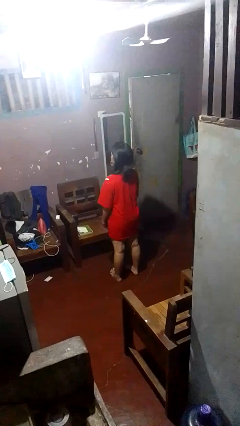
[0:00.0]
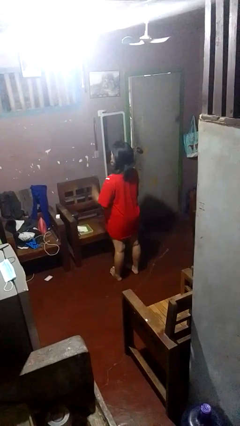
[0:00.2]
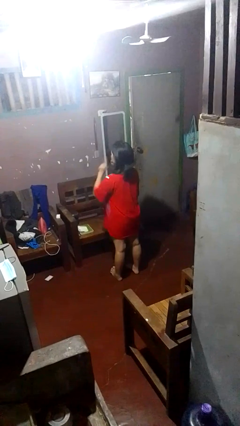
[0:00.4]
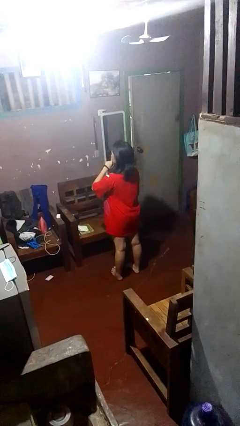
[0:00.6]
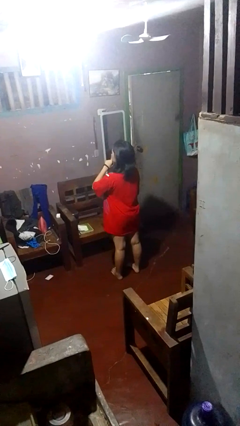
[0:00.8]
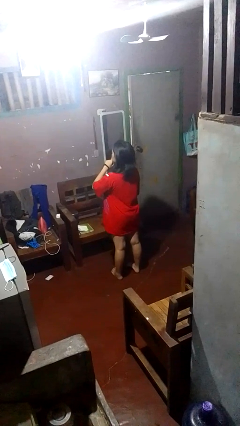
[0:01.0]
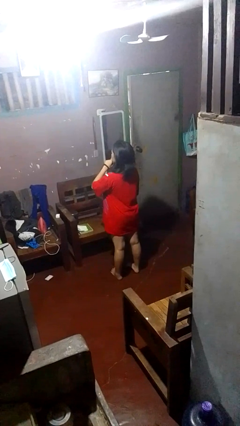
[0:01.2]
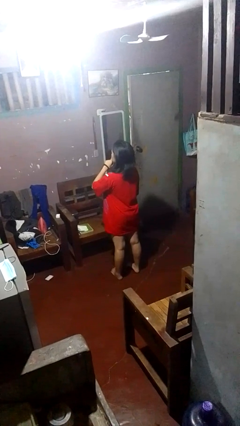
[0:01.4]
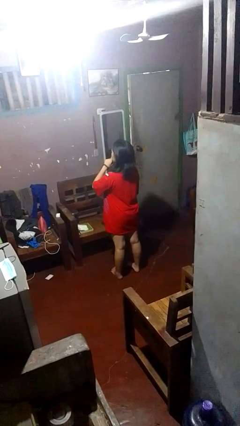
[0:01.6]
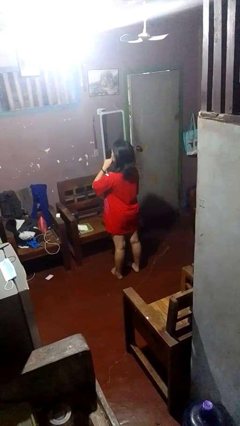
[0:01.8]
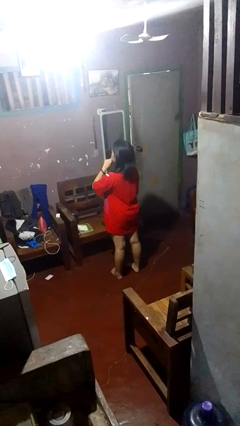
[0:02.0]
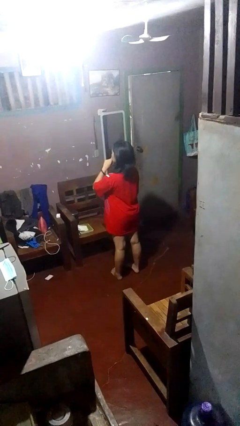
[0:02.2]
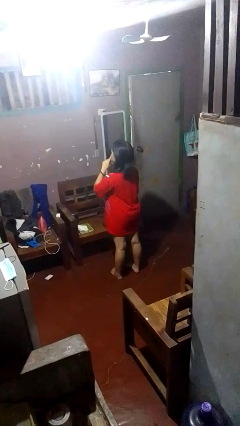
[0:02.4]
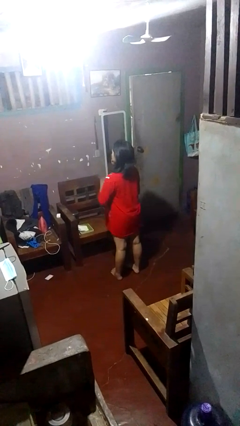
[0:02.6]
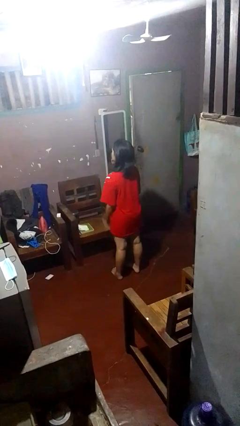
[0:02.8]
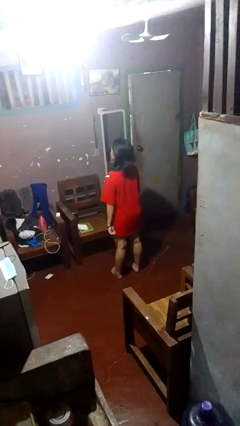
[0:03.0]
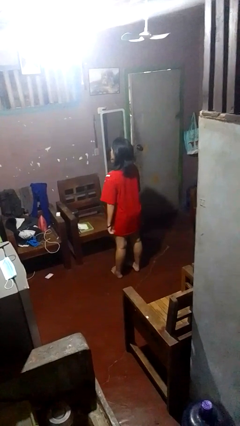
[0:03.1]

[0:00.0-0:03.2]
person gestures be quiet

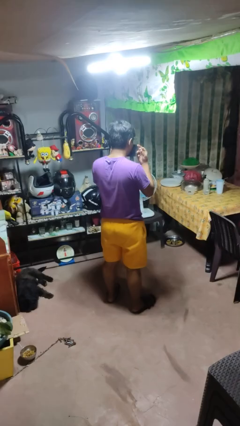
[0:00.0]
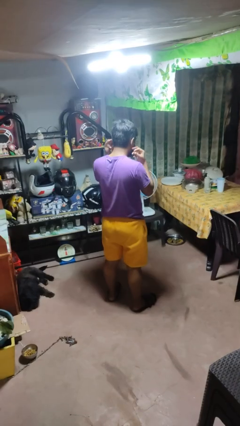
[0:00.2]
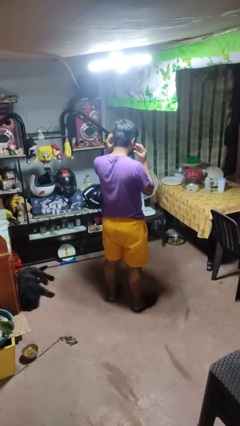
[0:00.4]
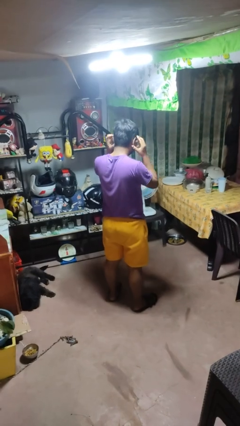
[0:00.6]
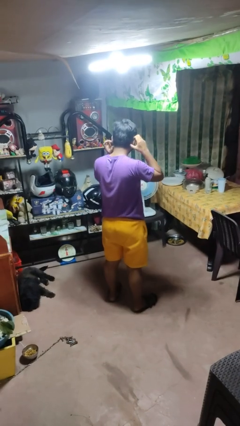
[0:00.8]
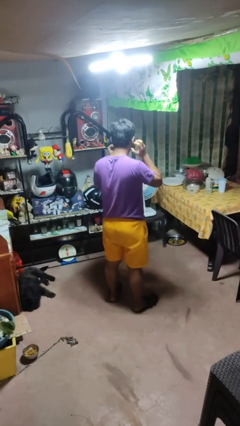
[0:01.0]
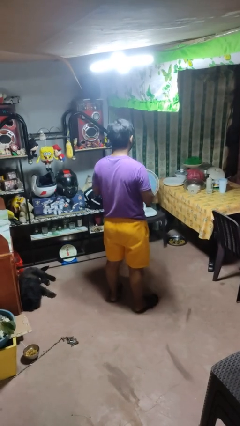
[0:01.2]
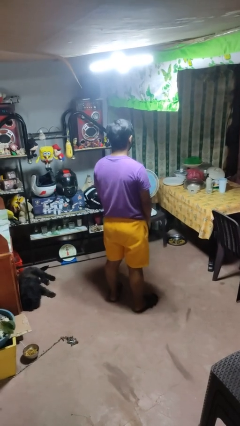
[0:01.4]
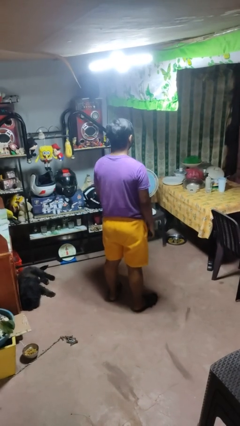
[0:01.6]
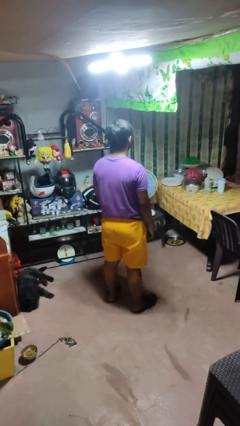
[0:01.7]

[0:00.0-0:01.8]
person puts on facemask

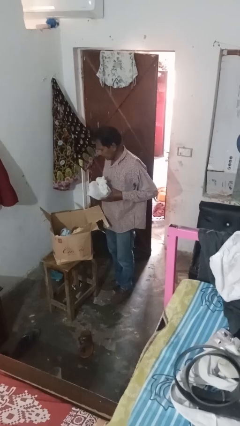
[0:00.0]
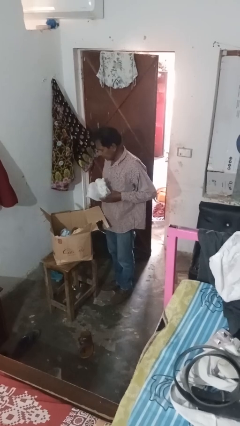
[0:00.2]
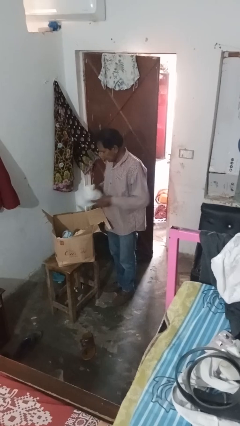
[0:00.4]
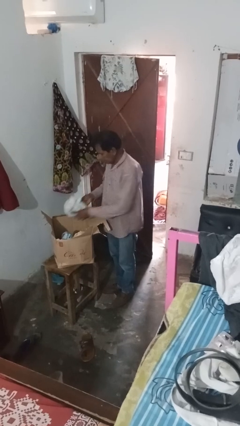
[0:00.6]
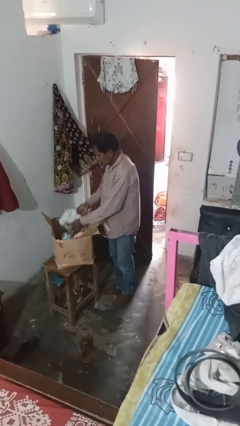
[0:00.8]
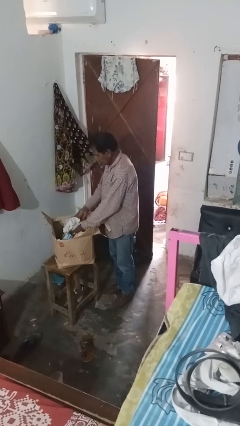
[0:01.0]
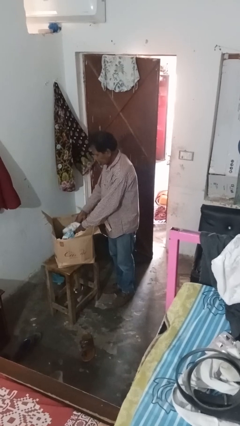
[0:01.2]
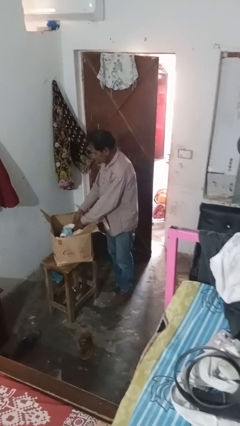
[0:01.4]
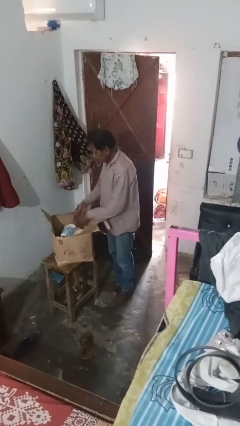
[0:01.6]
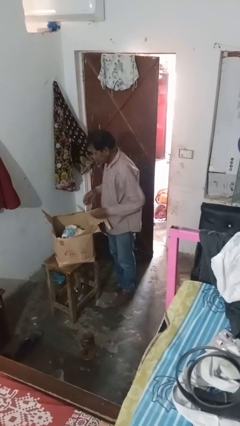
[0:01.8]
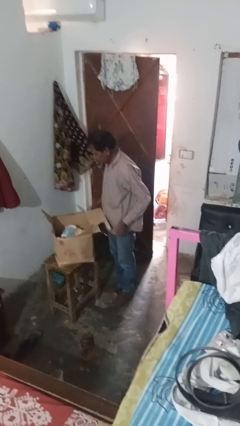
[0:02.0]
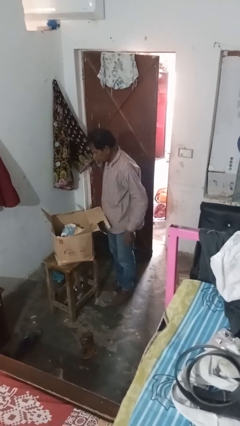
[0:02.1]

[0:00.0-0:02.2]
person puts object into box

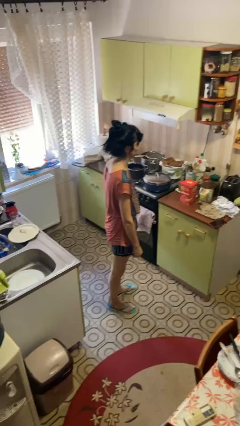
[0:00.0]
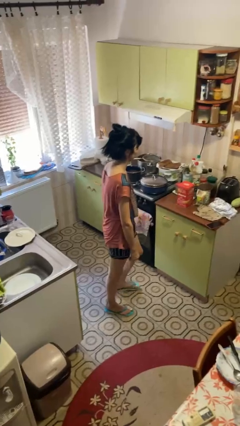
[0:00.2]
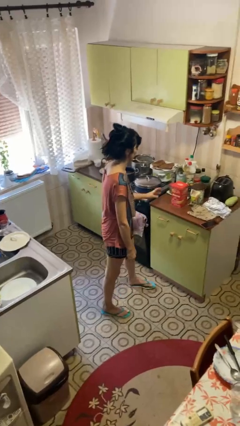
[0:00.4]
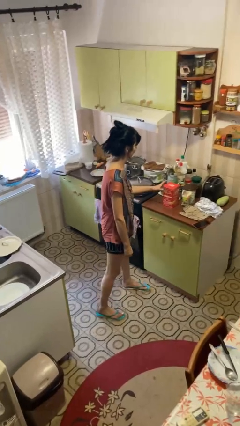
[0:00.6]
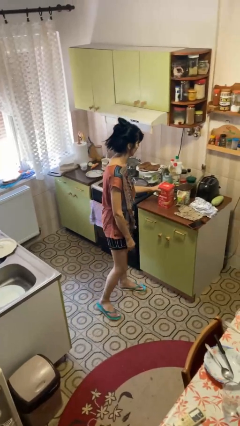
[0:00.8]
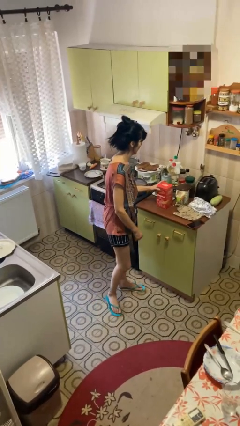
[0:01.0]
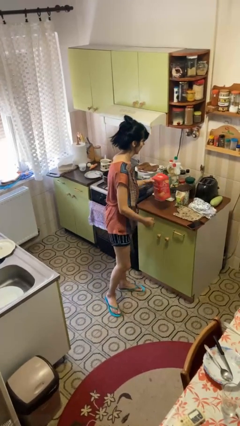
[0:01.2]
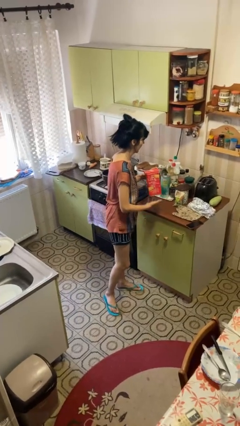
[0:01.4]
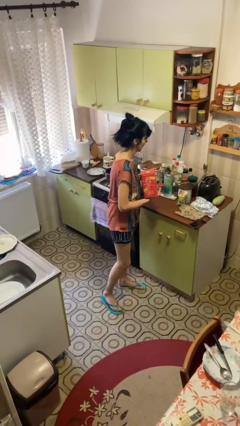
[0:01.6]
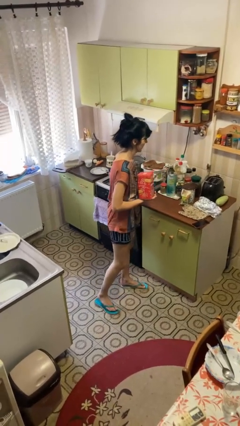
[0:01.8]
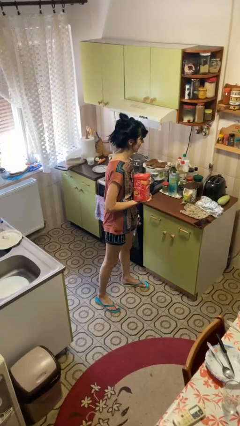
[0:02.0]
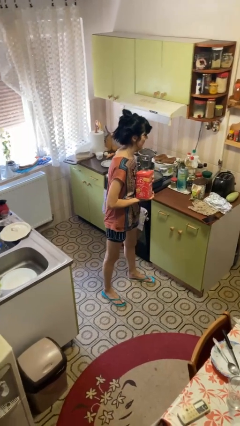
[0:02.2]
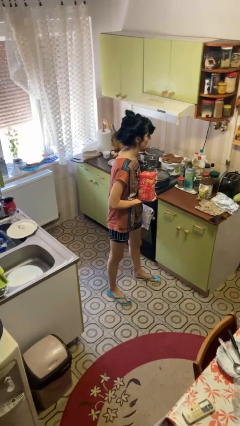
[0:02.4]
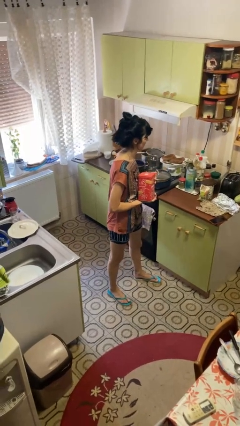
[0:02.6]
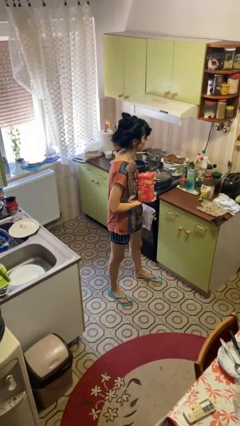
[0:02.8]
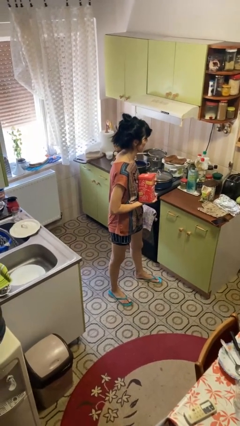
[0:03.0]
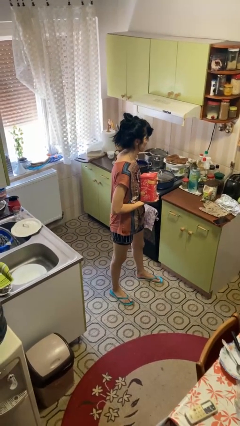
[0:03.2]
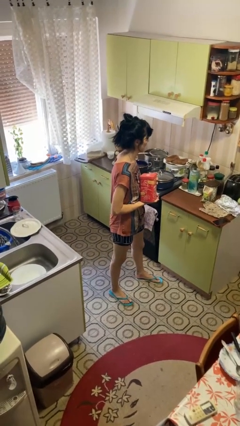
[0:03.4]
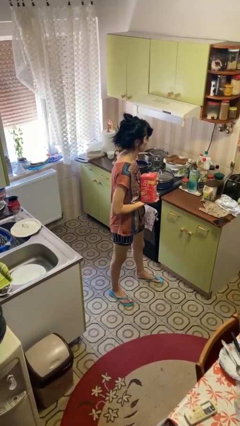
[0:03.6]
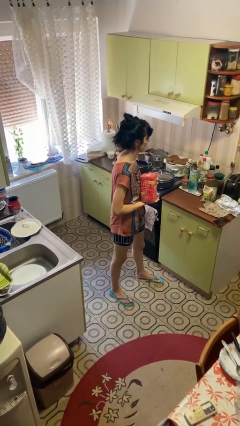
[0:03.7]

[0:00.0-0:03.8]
person picks up object from countertop

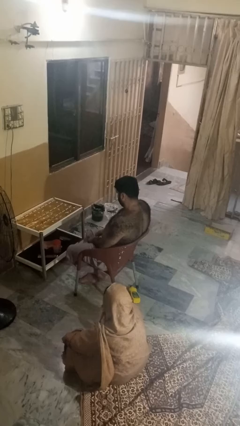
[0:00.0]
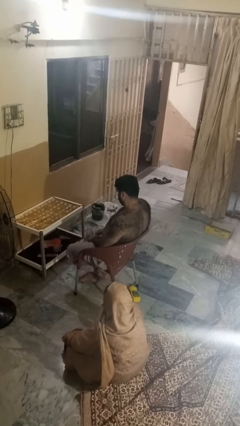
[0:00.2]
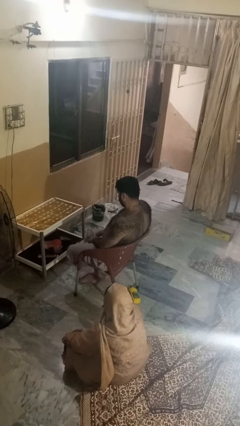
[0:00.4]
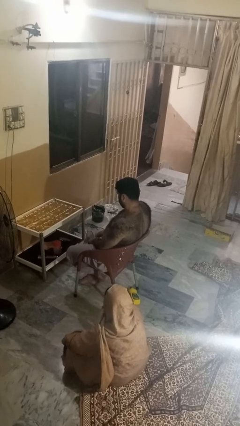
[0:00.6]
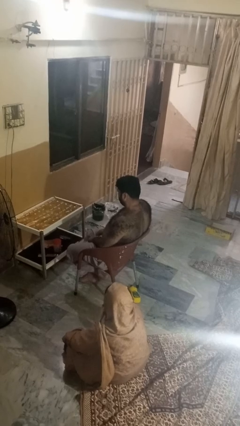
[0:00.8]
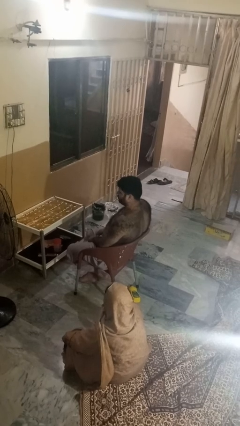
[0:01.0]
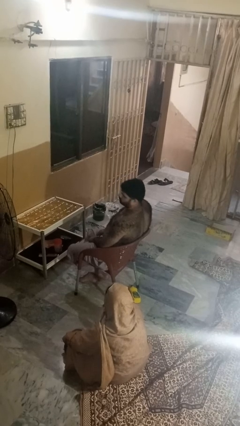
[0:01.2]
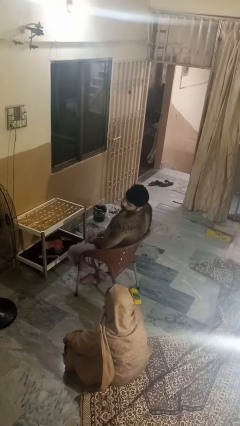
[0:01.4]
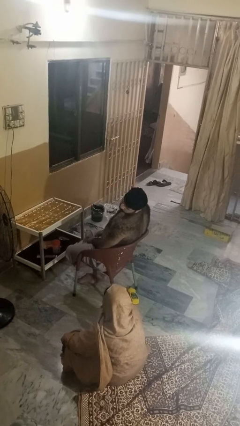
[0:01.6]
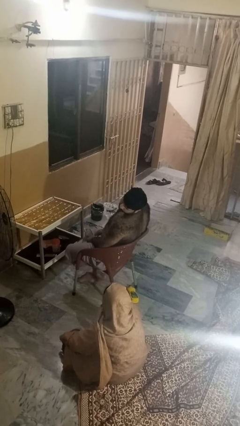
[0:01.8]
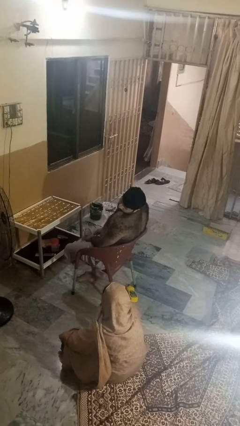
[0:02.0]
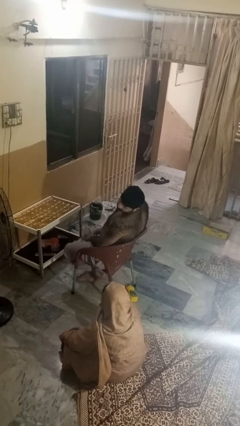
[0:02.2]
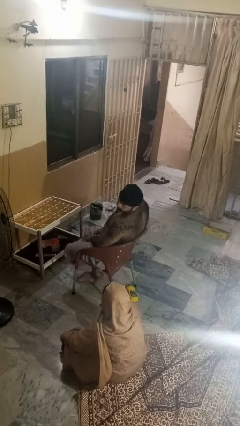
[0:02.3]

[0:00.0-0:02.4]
person looks over shoulder

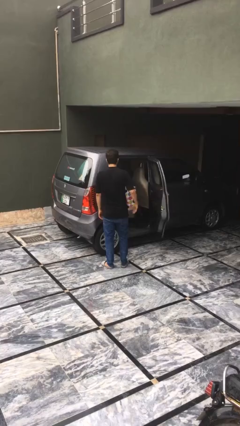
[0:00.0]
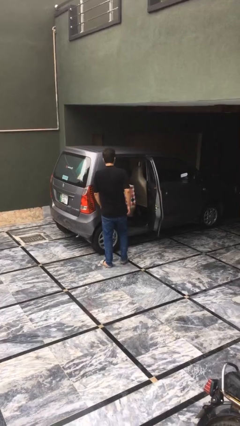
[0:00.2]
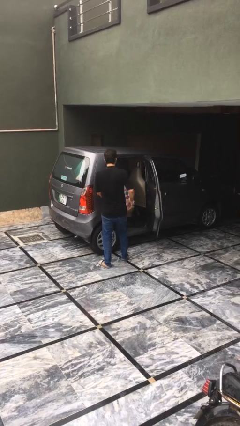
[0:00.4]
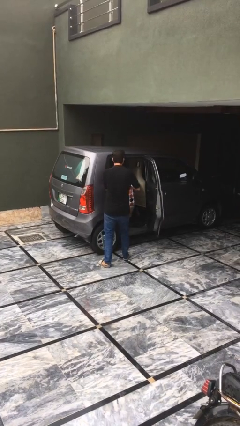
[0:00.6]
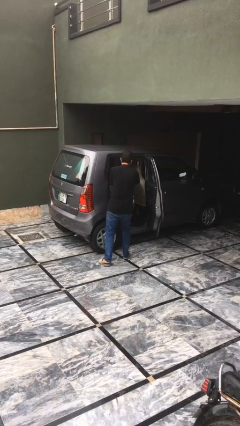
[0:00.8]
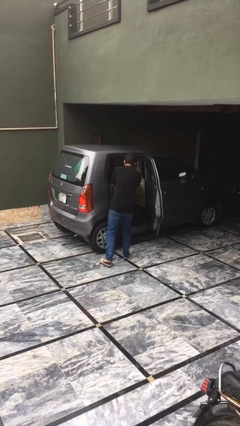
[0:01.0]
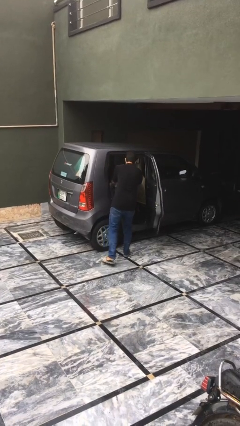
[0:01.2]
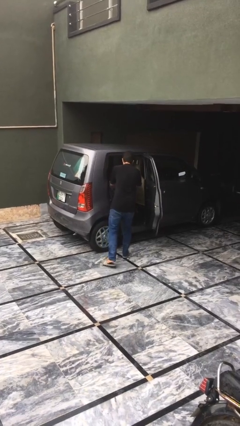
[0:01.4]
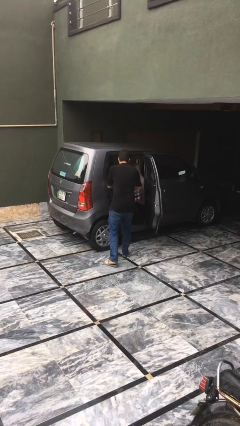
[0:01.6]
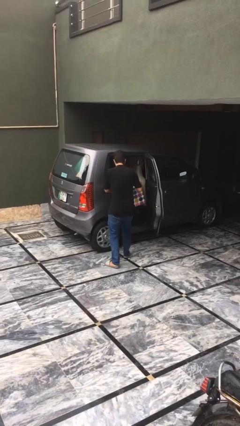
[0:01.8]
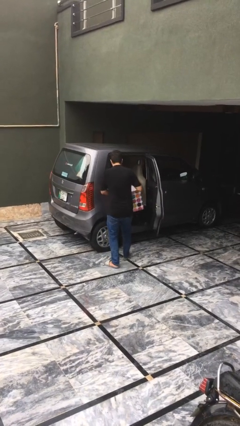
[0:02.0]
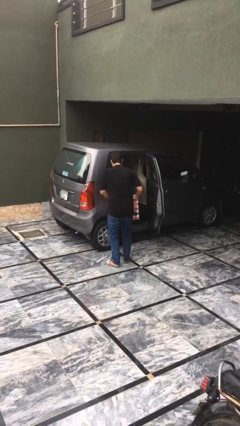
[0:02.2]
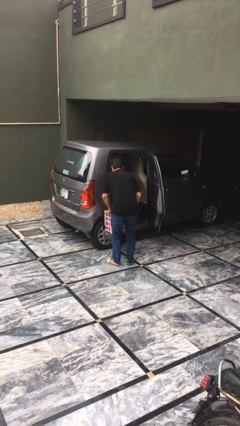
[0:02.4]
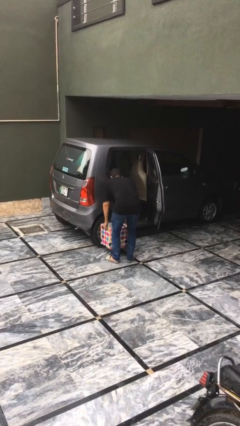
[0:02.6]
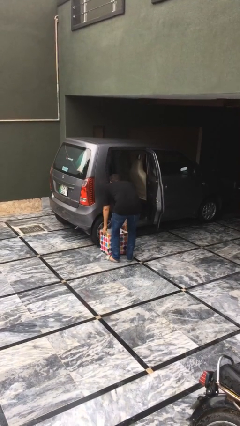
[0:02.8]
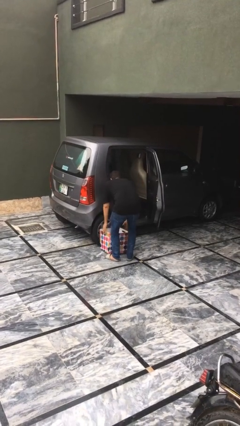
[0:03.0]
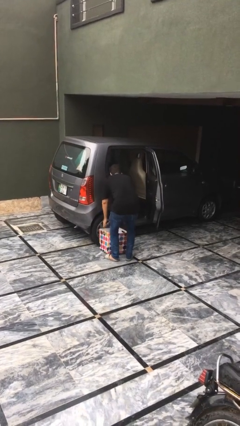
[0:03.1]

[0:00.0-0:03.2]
person unloads car

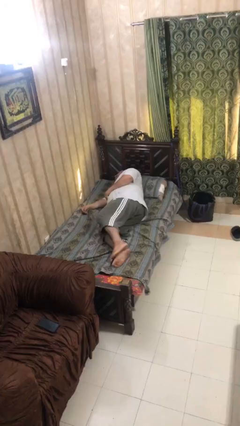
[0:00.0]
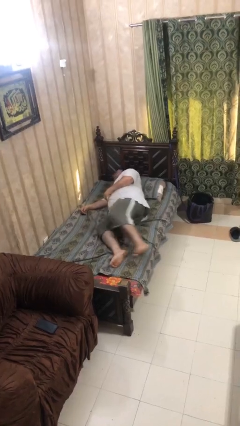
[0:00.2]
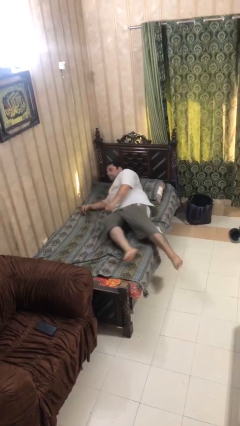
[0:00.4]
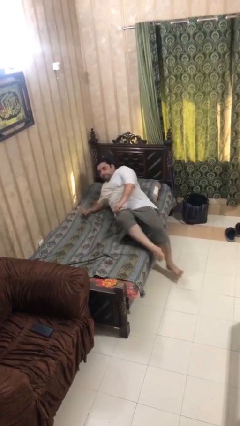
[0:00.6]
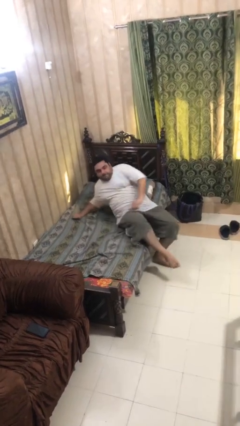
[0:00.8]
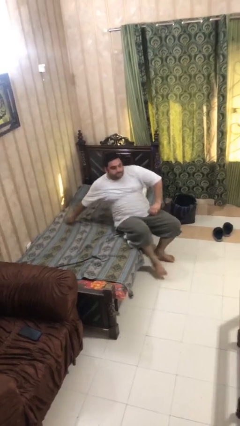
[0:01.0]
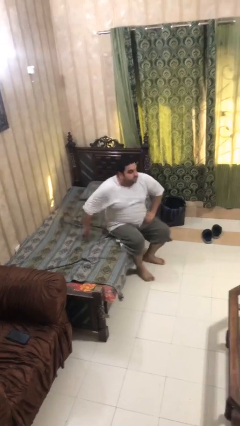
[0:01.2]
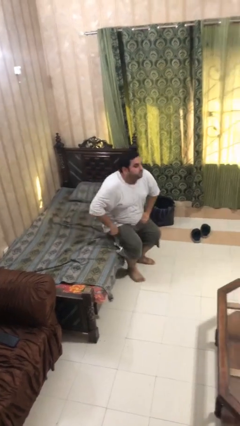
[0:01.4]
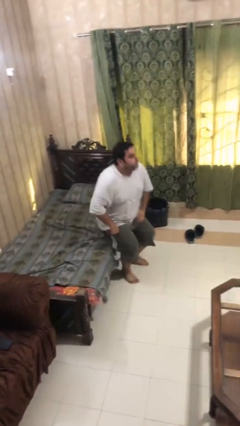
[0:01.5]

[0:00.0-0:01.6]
person stands up
